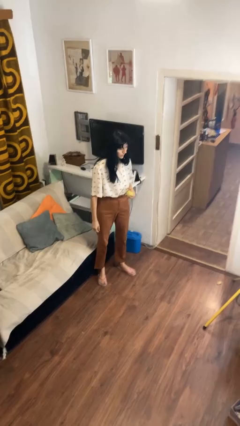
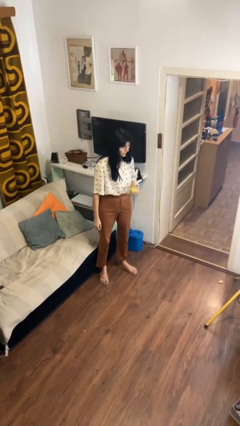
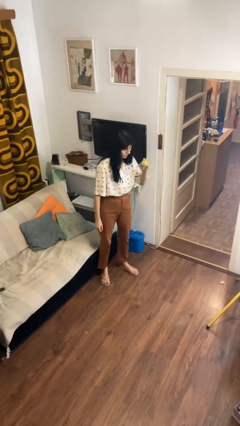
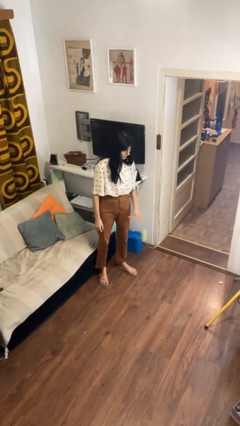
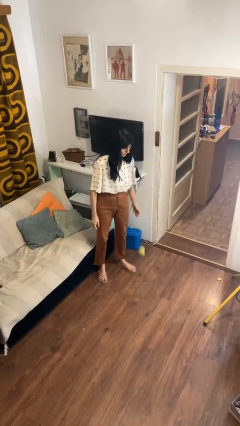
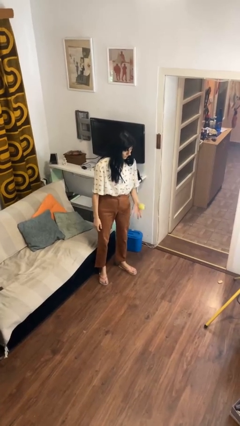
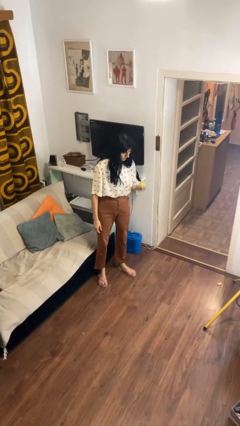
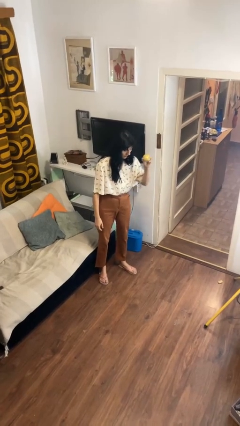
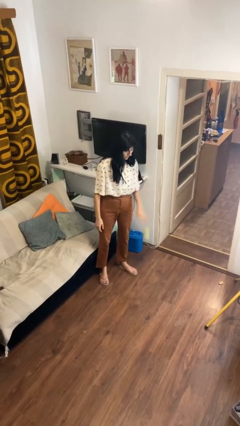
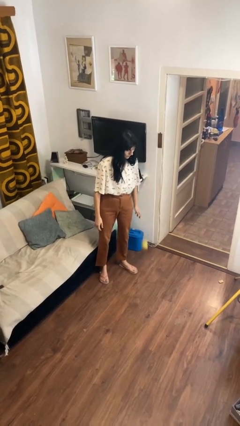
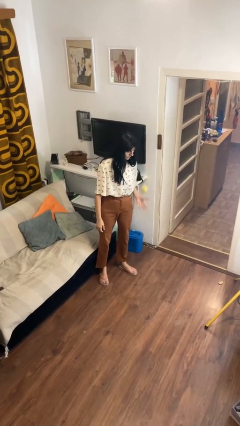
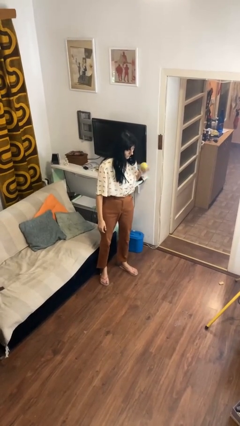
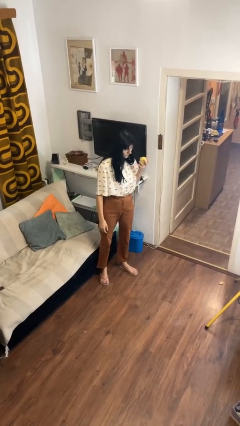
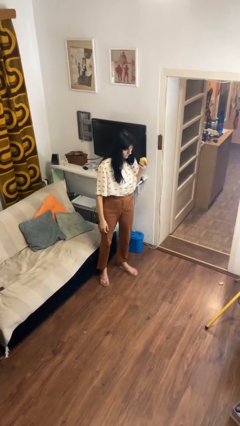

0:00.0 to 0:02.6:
person bounces ball on floor

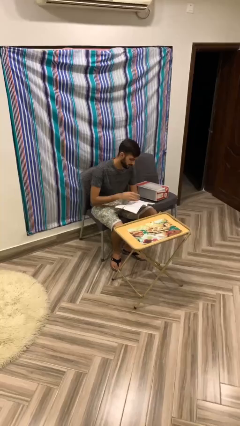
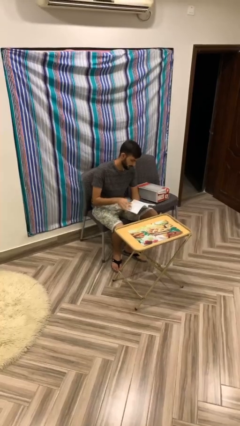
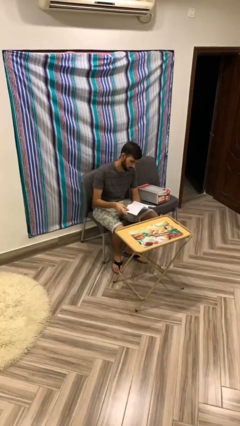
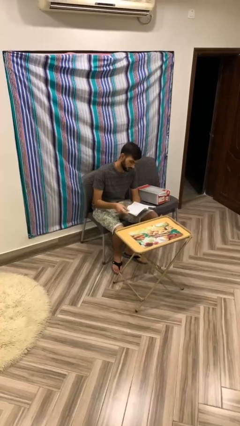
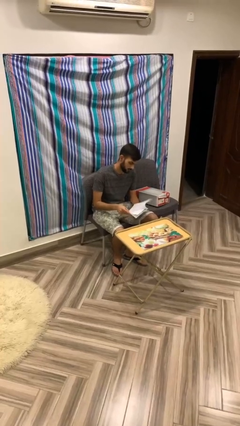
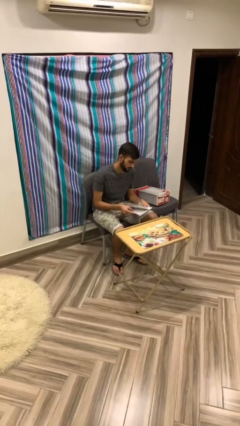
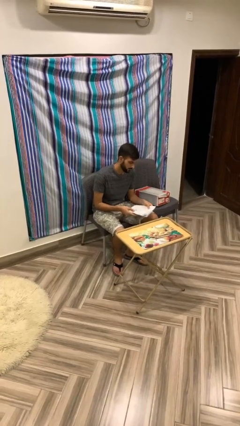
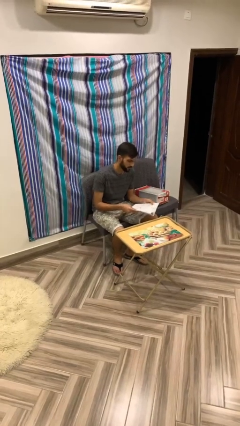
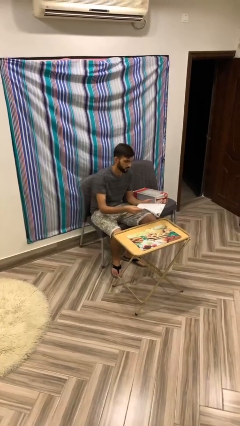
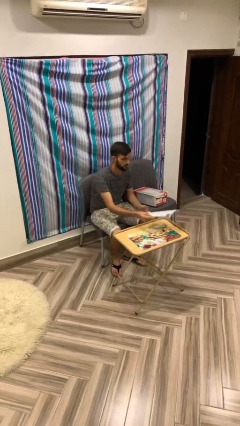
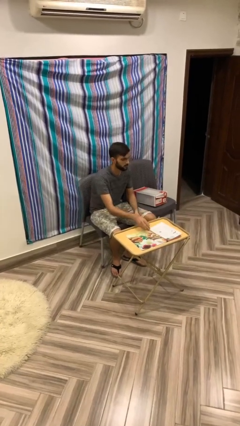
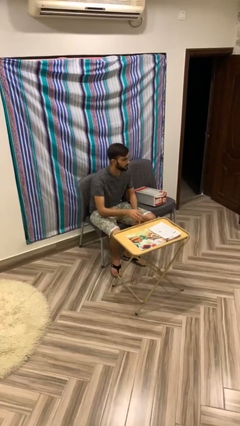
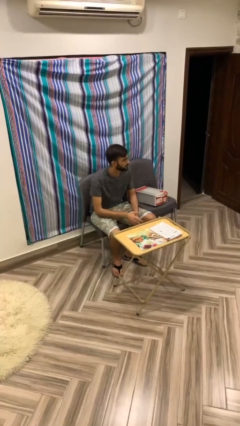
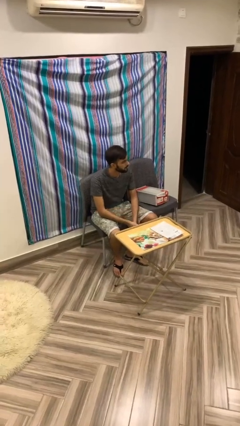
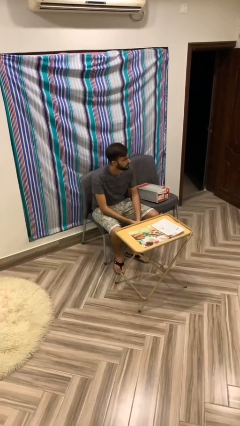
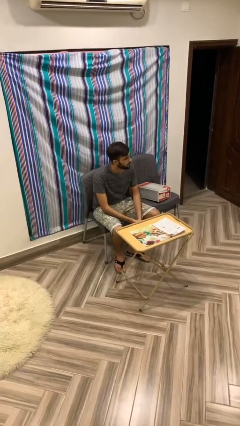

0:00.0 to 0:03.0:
person puts down object on table

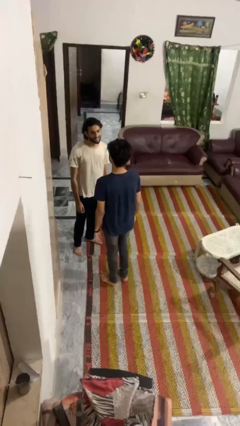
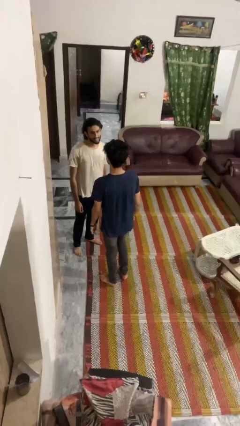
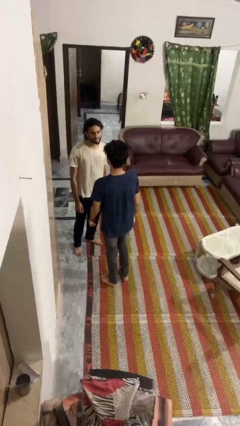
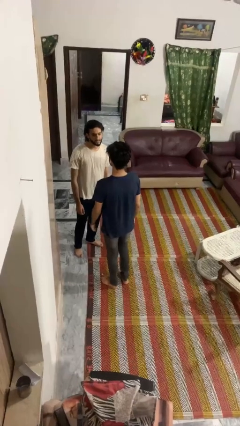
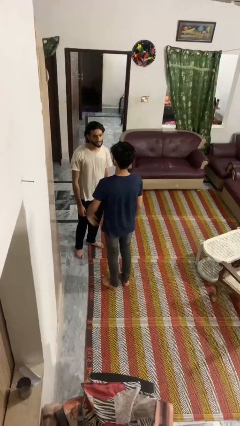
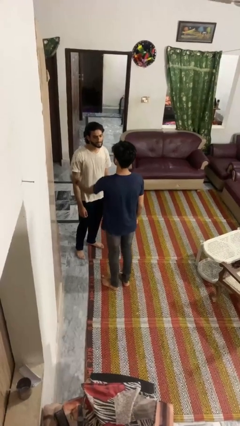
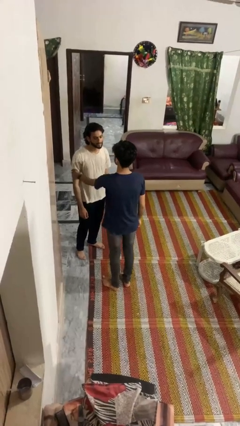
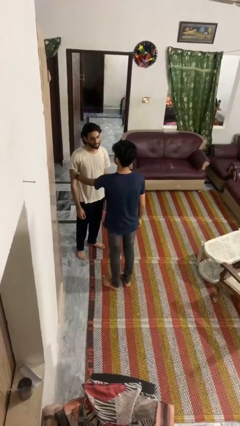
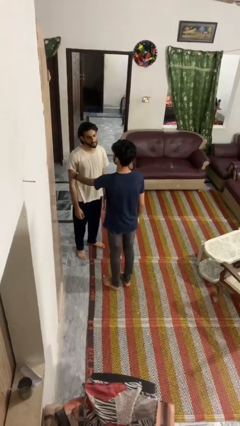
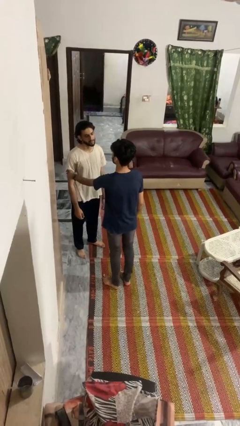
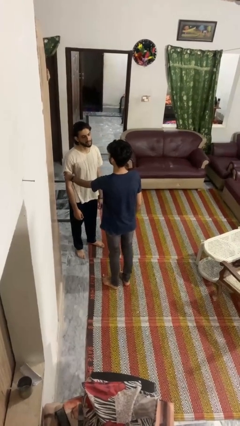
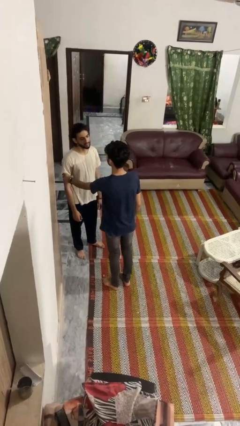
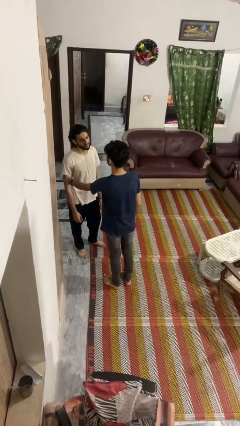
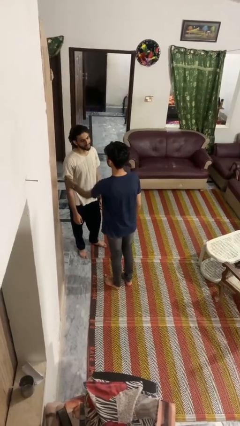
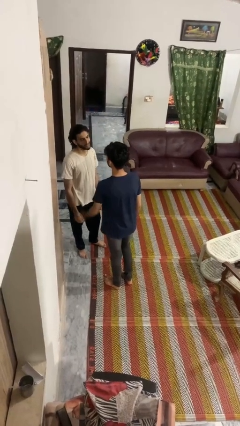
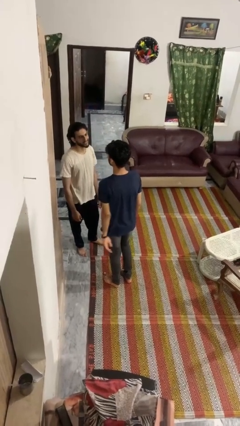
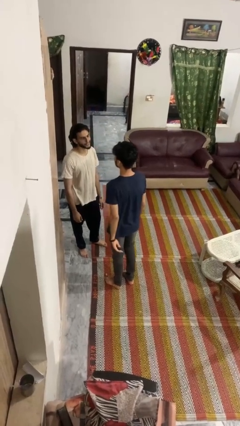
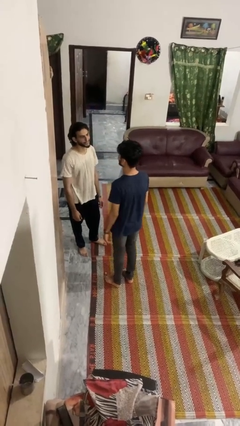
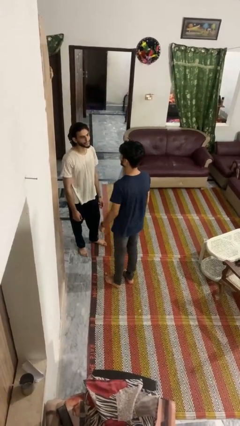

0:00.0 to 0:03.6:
person grabs person by bicep

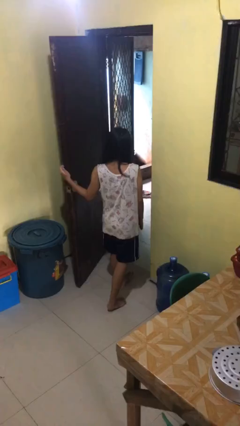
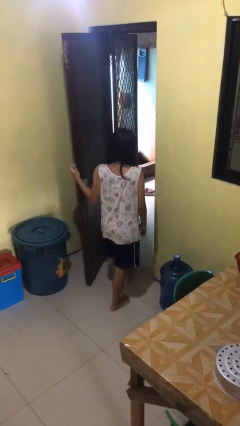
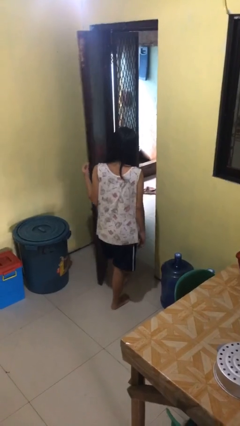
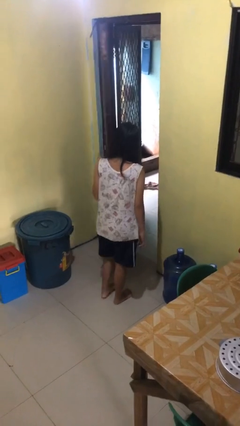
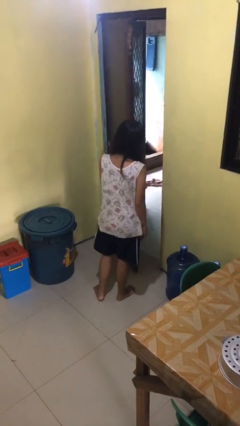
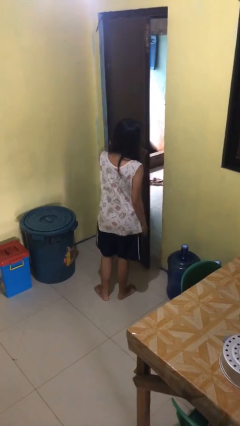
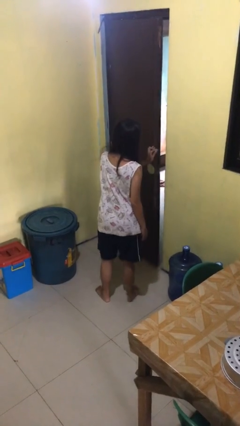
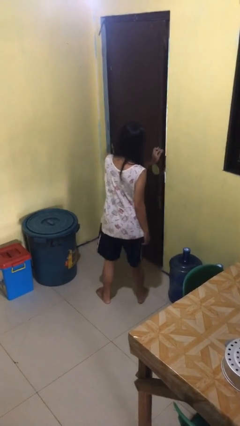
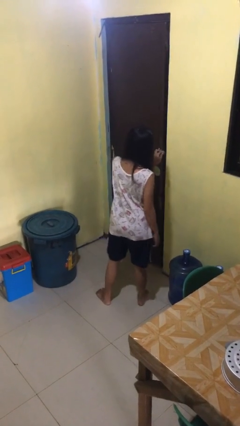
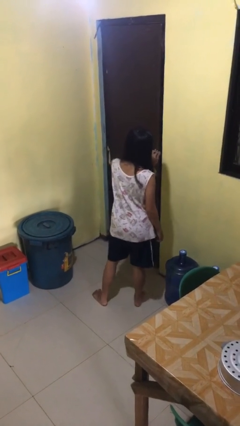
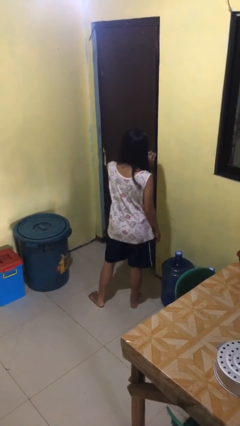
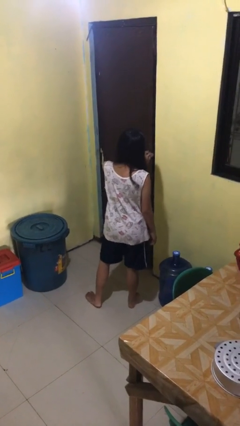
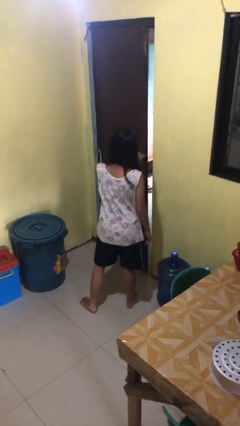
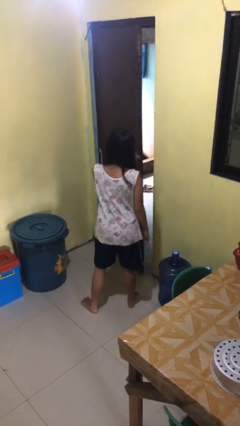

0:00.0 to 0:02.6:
person closes facility door

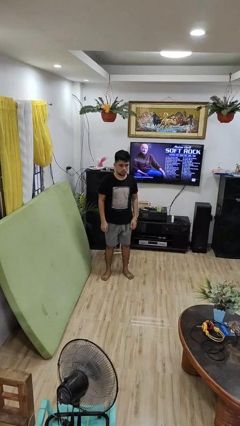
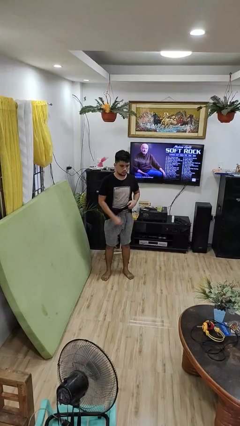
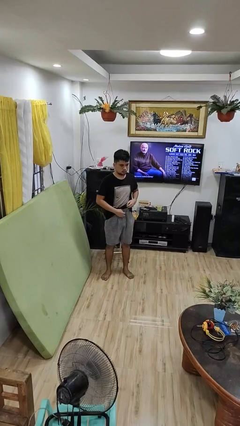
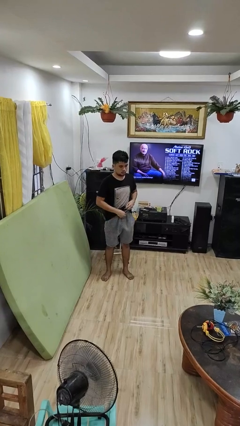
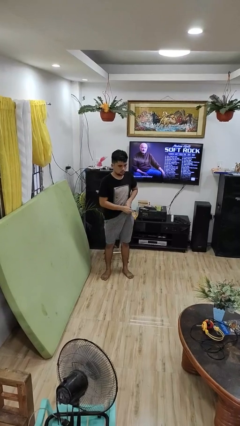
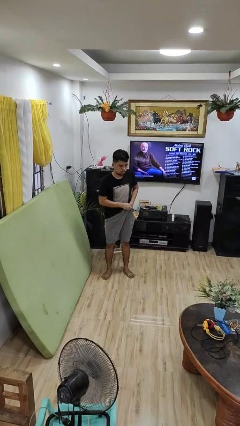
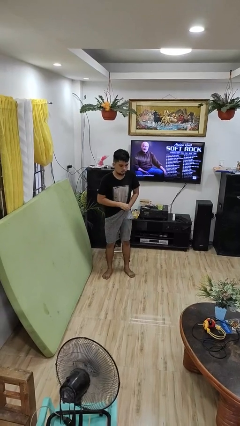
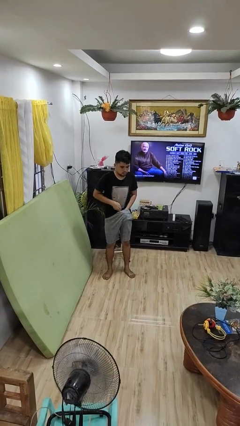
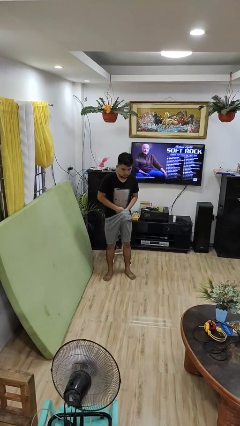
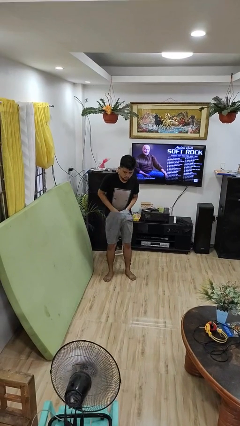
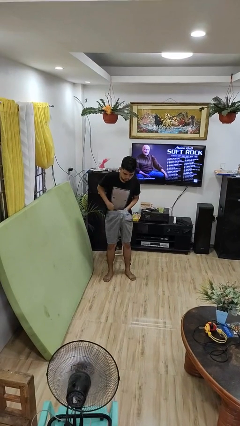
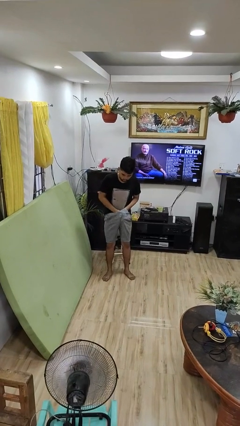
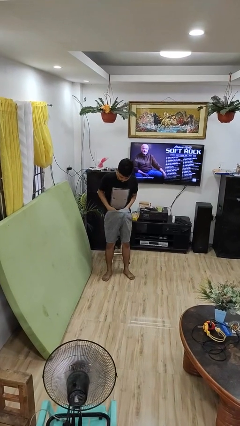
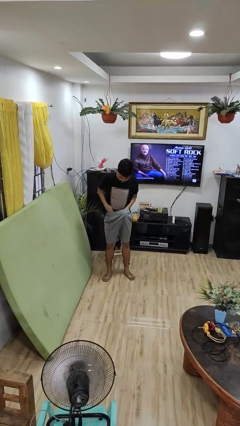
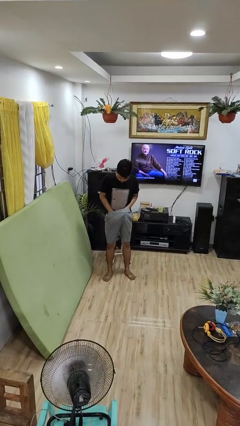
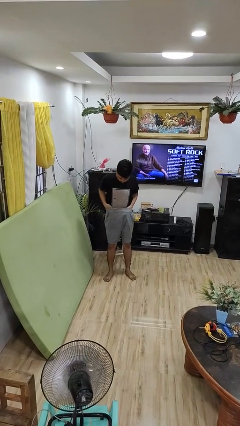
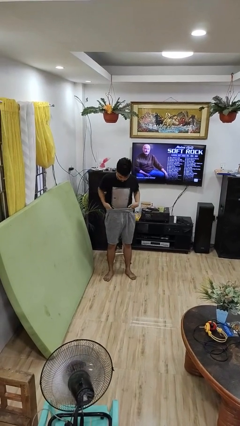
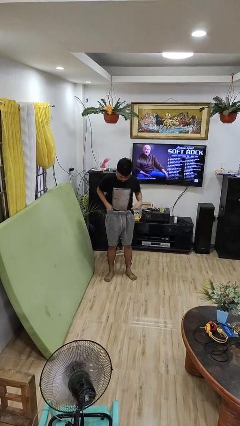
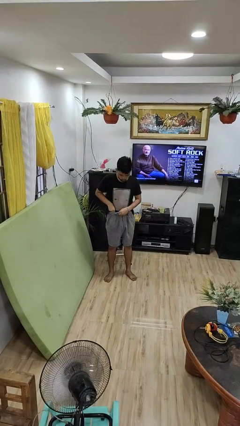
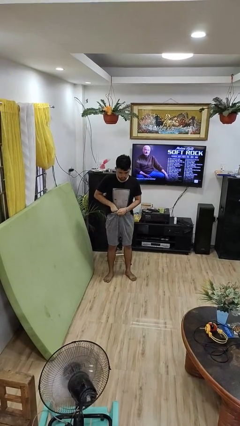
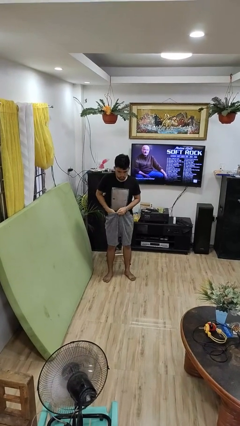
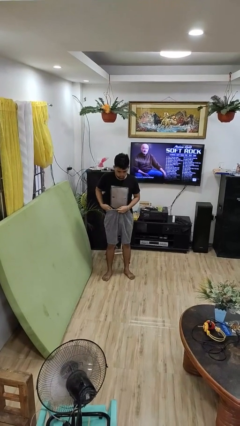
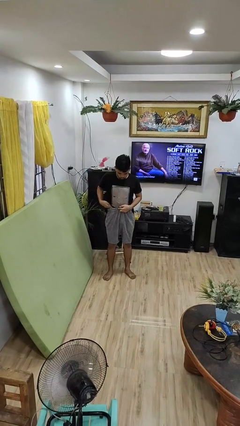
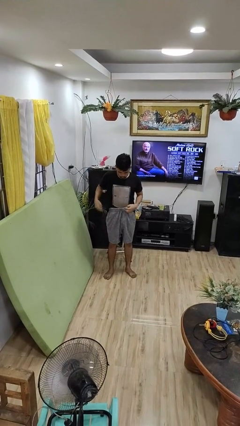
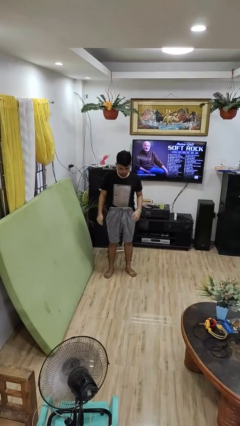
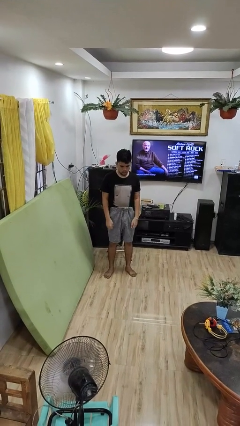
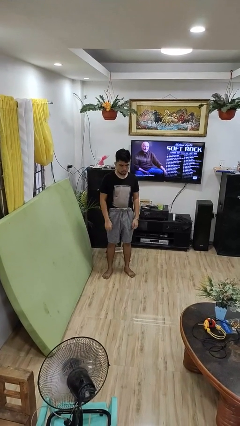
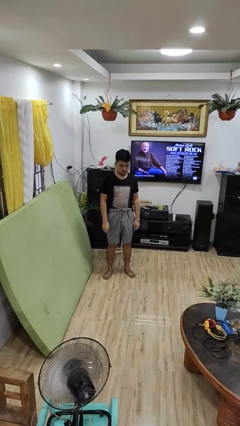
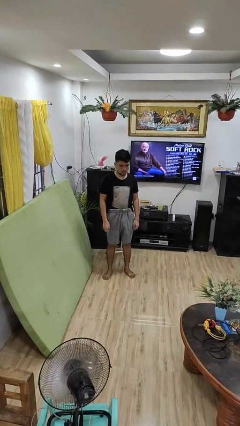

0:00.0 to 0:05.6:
person tucks in shirt
